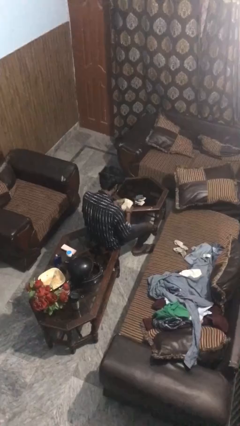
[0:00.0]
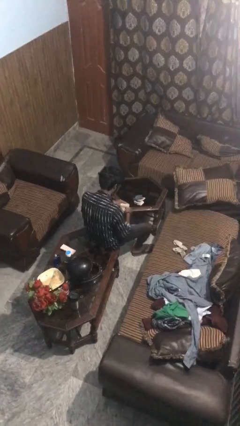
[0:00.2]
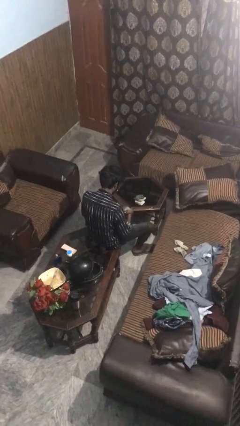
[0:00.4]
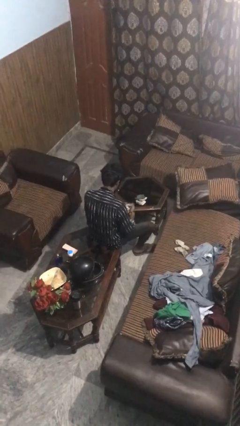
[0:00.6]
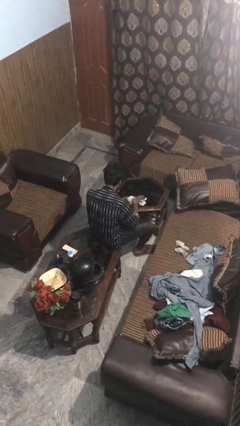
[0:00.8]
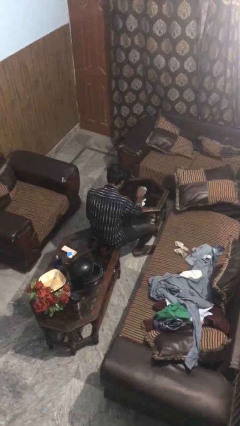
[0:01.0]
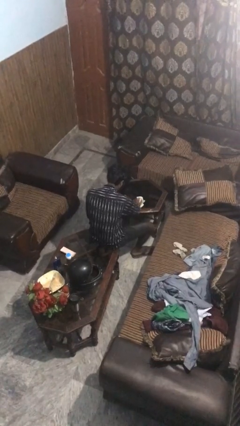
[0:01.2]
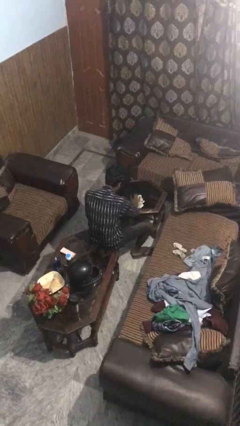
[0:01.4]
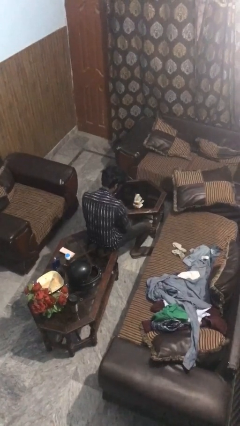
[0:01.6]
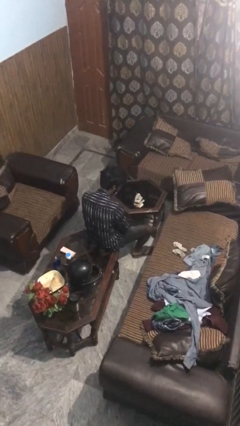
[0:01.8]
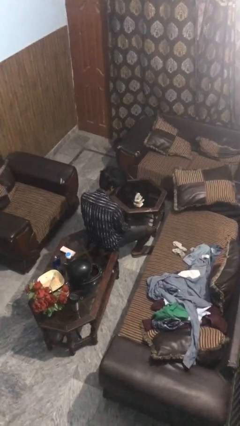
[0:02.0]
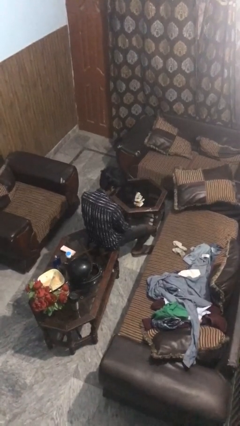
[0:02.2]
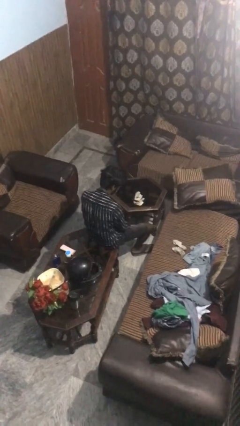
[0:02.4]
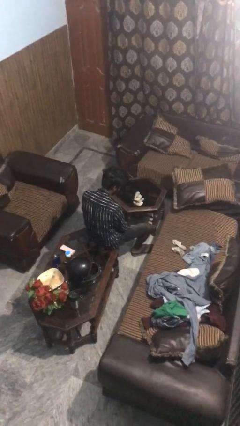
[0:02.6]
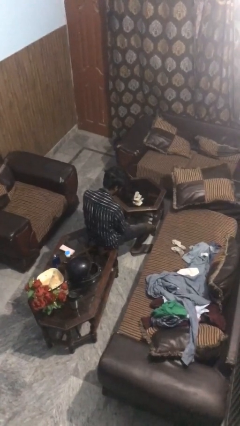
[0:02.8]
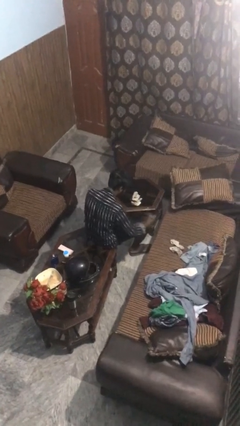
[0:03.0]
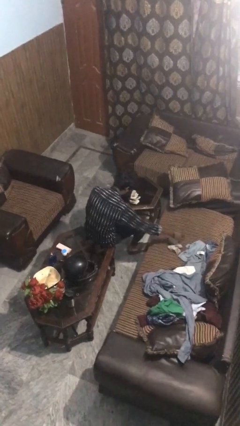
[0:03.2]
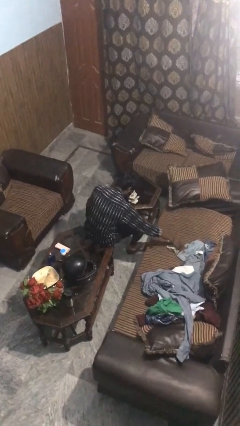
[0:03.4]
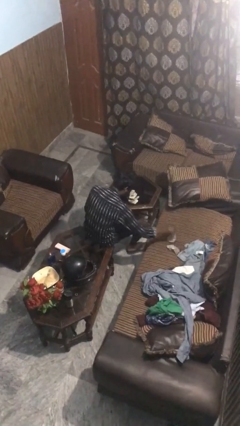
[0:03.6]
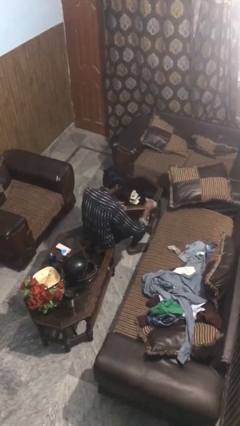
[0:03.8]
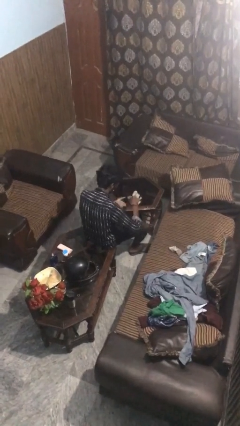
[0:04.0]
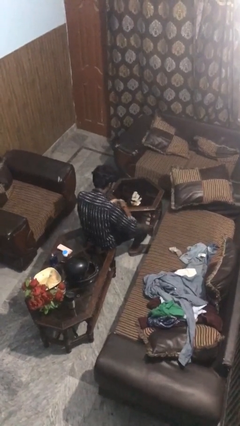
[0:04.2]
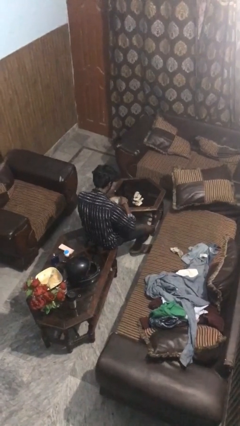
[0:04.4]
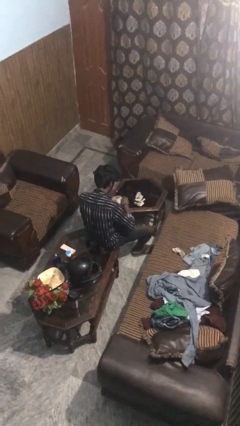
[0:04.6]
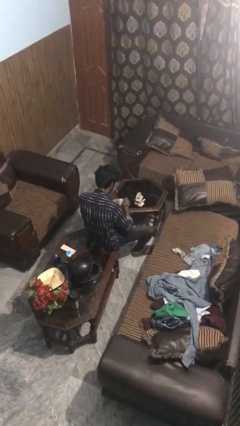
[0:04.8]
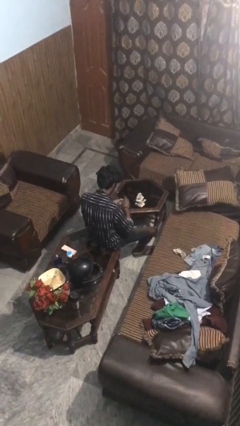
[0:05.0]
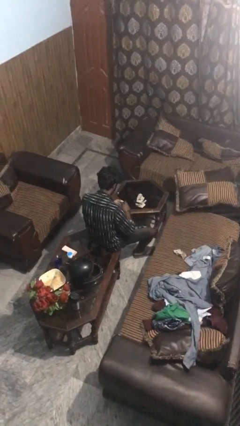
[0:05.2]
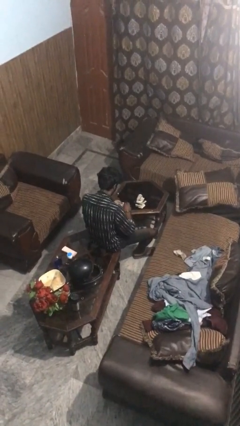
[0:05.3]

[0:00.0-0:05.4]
person folds socks

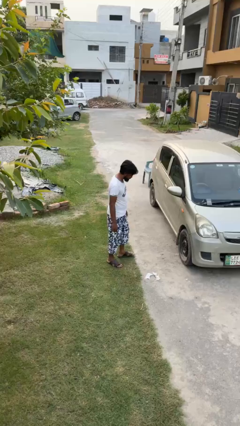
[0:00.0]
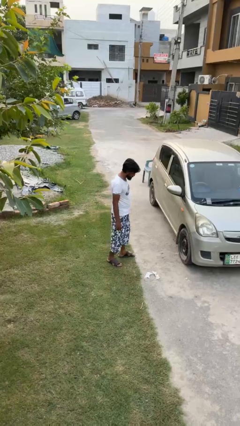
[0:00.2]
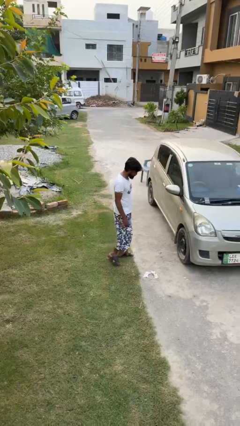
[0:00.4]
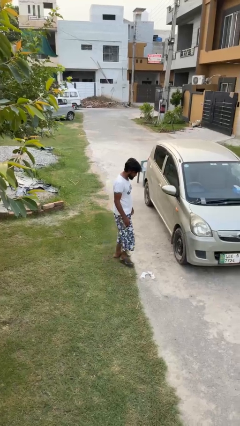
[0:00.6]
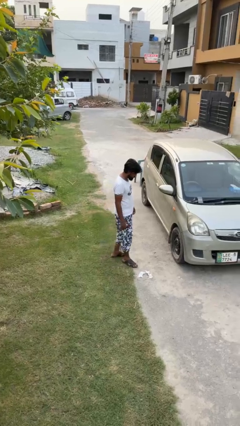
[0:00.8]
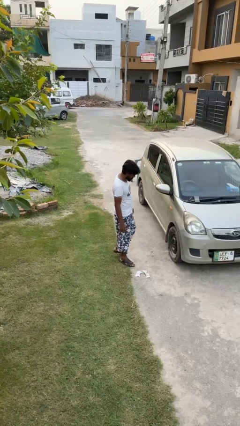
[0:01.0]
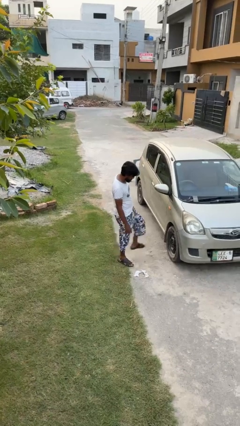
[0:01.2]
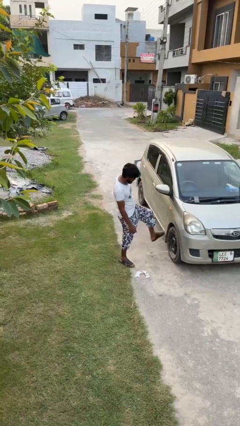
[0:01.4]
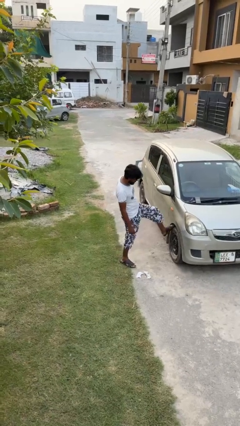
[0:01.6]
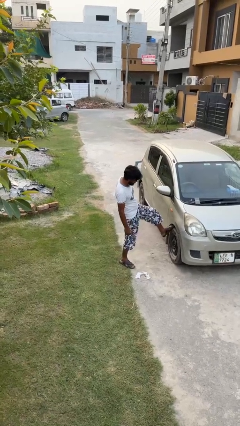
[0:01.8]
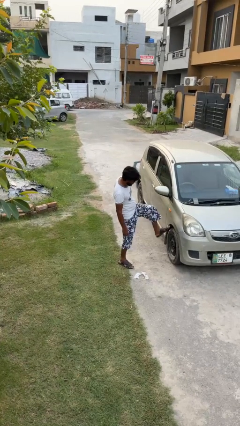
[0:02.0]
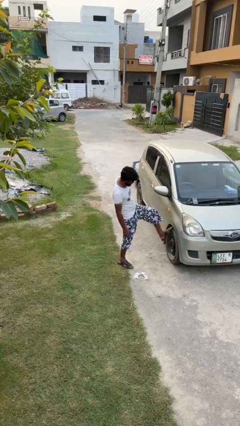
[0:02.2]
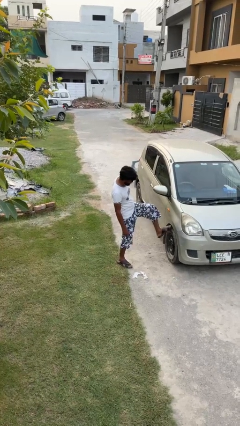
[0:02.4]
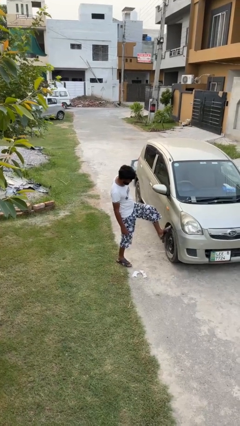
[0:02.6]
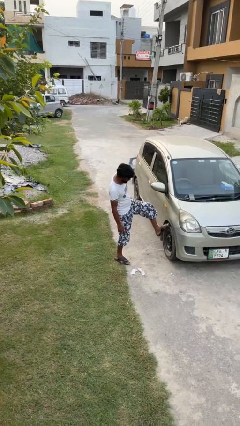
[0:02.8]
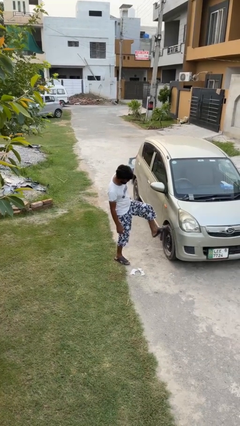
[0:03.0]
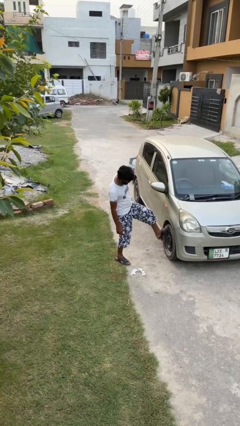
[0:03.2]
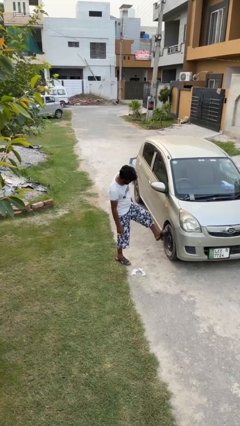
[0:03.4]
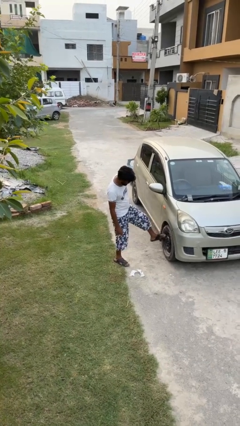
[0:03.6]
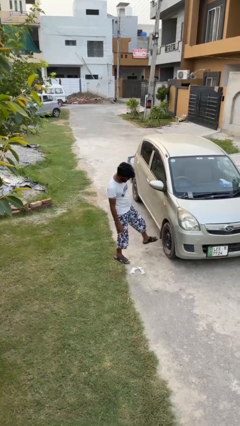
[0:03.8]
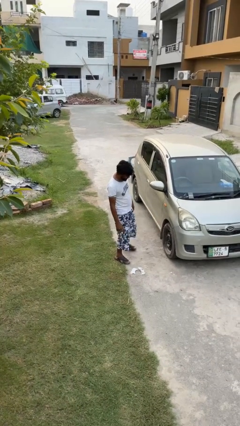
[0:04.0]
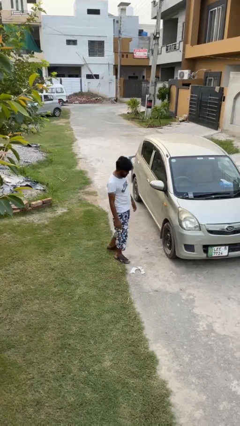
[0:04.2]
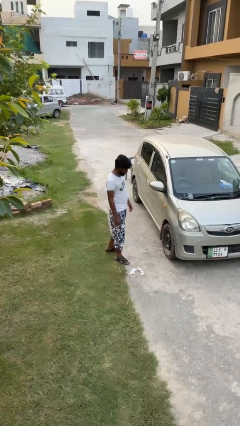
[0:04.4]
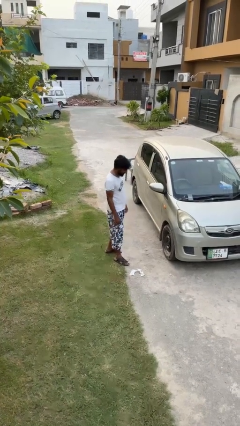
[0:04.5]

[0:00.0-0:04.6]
person kicks car tires

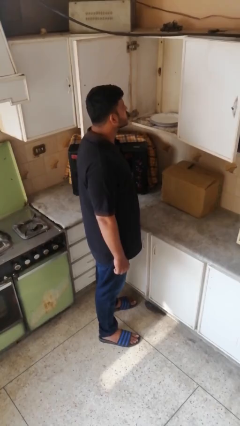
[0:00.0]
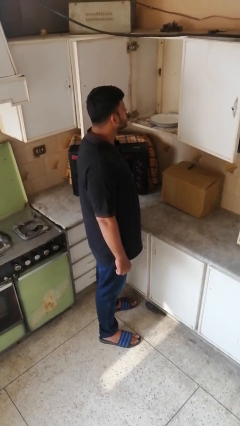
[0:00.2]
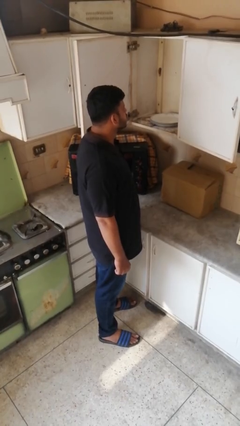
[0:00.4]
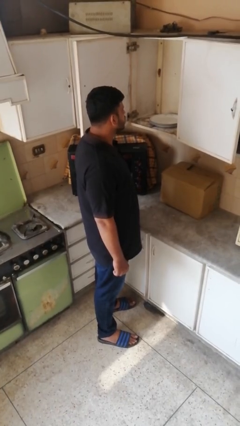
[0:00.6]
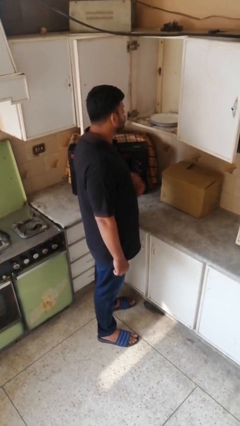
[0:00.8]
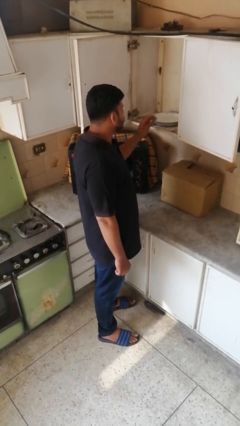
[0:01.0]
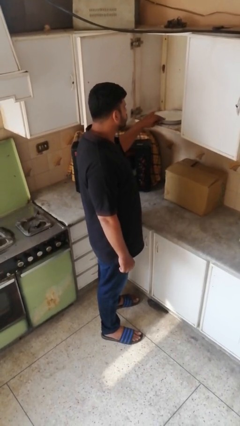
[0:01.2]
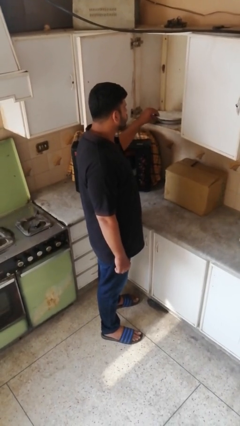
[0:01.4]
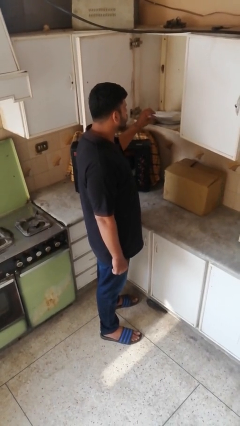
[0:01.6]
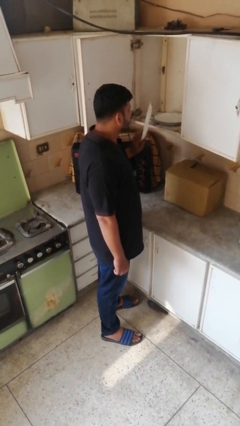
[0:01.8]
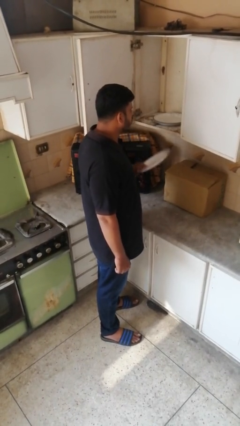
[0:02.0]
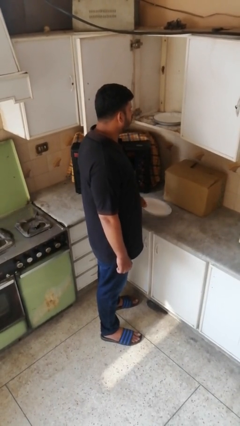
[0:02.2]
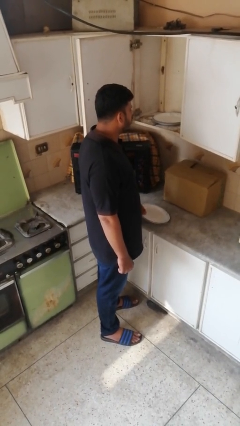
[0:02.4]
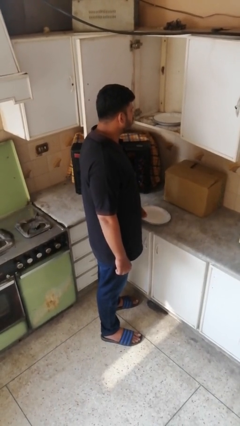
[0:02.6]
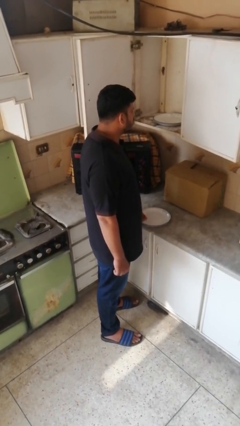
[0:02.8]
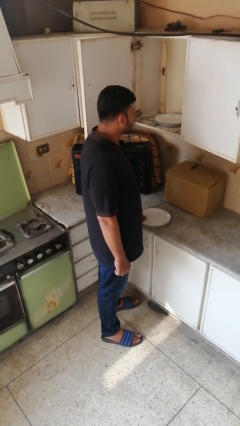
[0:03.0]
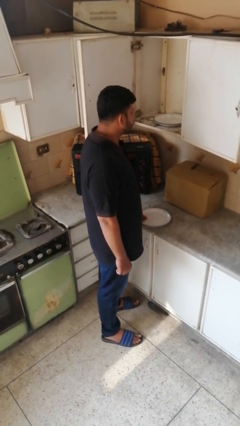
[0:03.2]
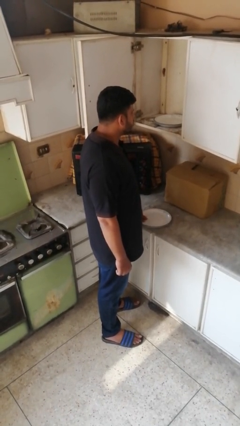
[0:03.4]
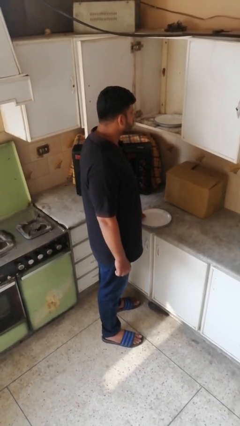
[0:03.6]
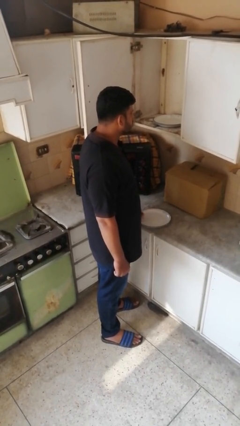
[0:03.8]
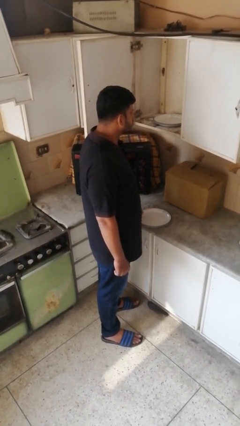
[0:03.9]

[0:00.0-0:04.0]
person takes object from cabinet

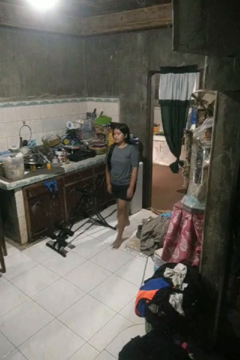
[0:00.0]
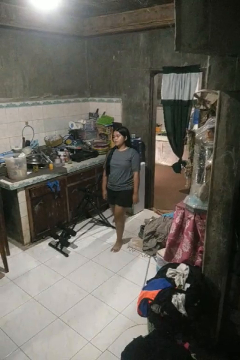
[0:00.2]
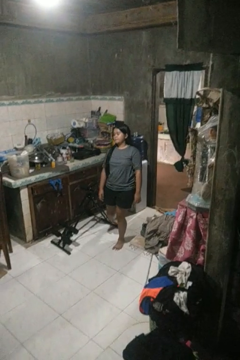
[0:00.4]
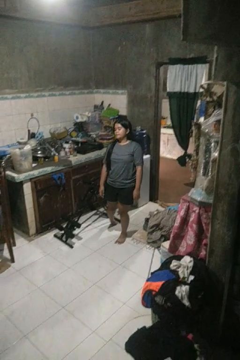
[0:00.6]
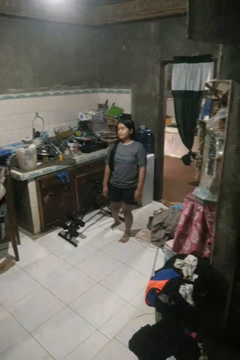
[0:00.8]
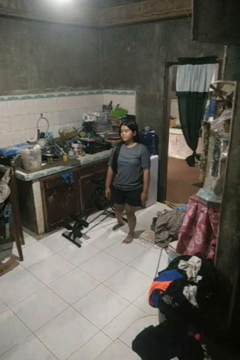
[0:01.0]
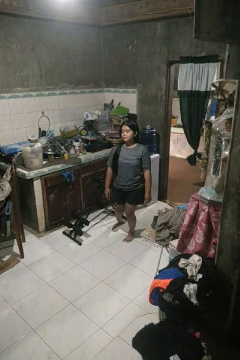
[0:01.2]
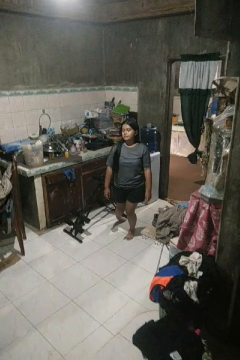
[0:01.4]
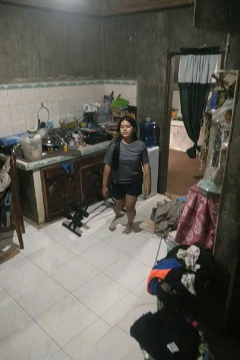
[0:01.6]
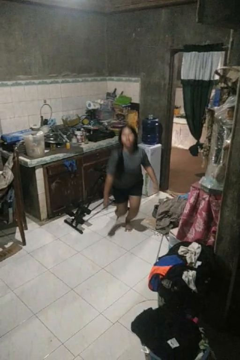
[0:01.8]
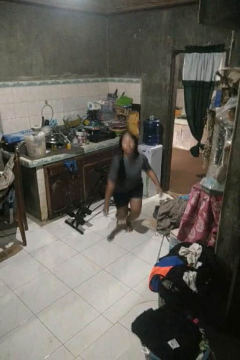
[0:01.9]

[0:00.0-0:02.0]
person trips on object on floor

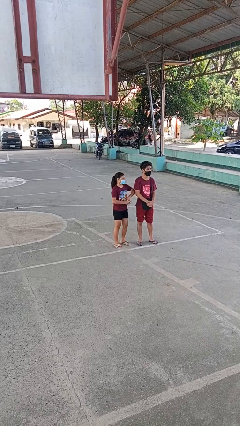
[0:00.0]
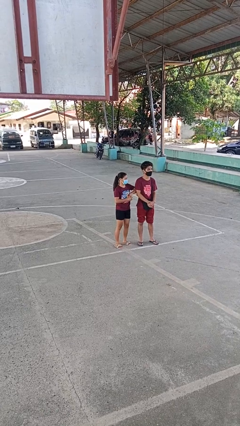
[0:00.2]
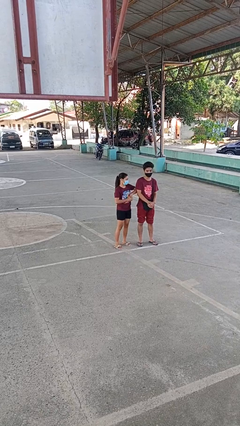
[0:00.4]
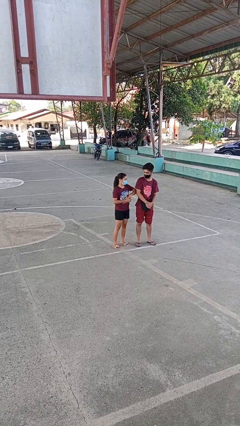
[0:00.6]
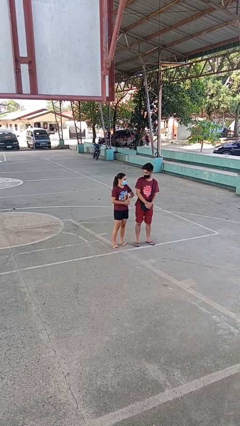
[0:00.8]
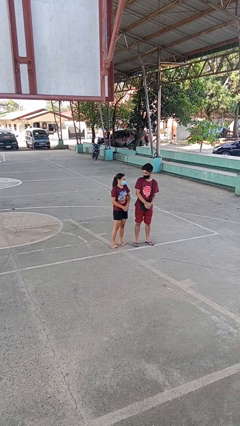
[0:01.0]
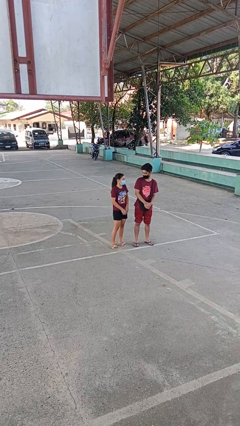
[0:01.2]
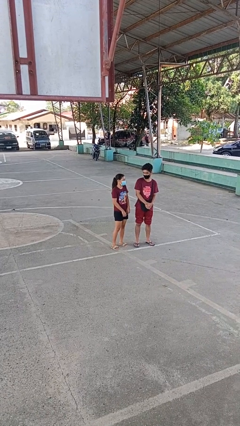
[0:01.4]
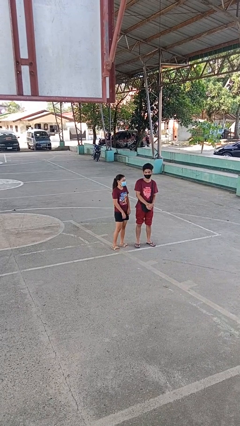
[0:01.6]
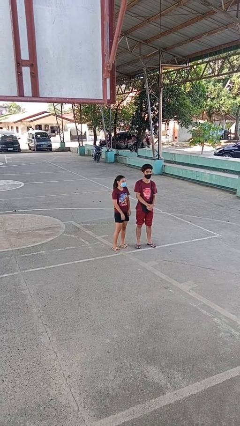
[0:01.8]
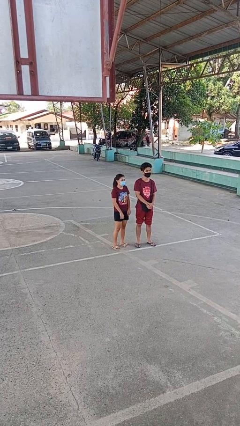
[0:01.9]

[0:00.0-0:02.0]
person nudges person with elbow
